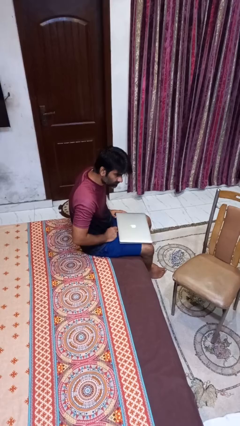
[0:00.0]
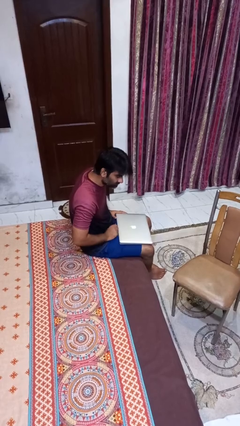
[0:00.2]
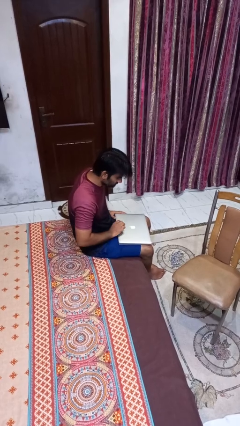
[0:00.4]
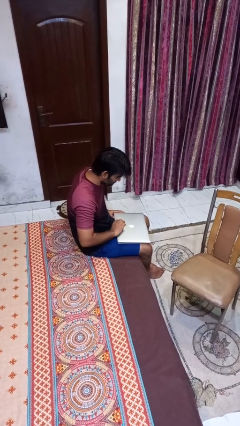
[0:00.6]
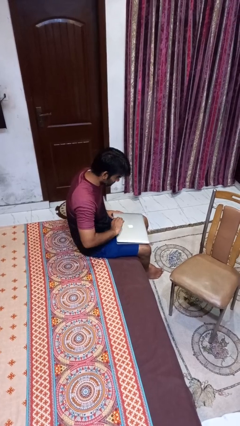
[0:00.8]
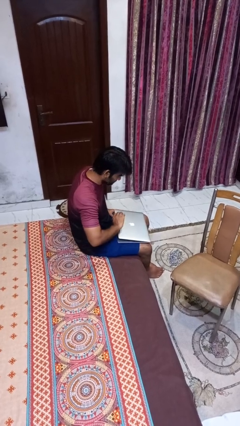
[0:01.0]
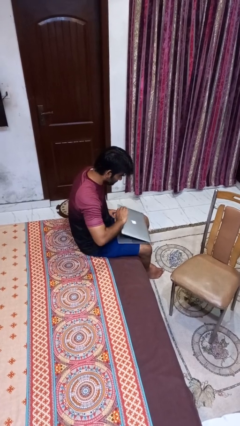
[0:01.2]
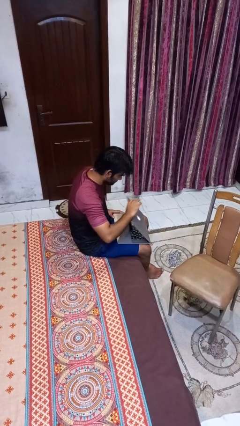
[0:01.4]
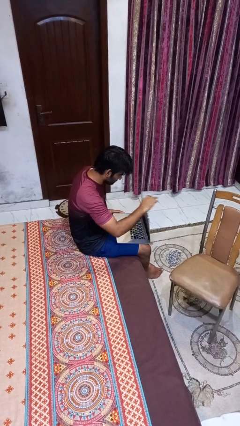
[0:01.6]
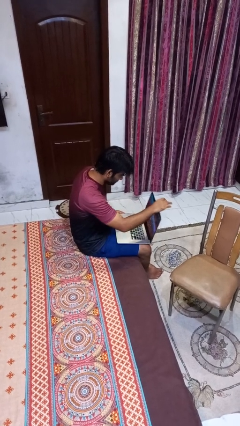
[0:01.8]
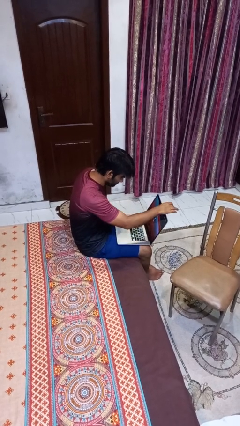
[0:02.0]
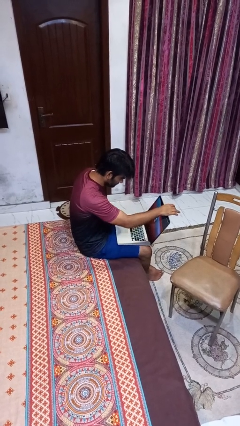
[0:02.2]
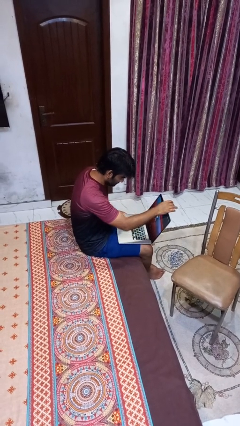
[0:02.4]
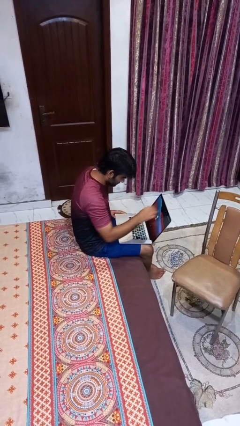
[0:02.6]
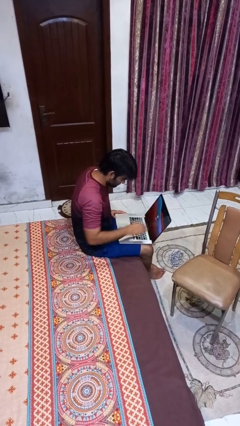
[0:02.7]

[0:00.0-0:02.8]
person opens laptop

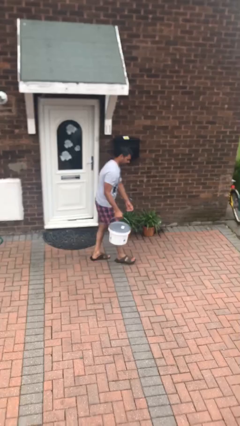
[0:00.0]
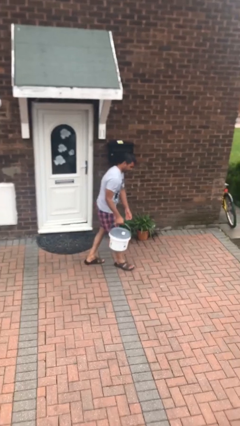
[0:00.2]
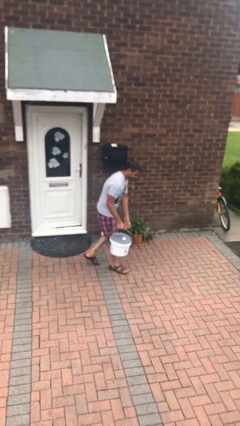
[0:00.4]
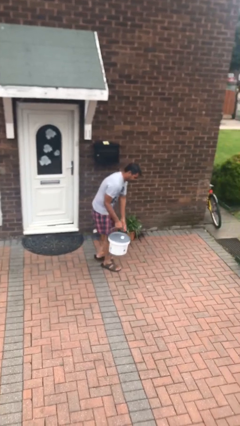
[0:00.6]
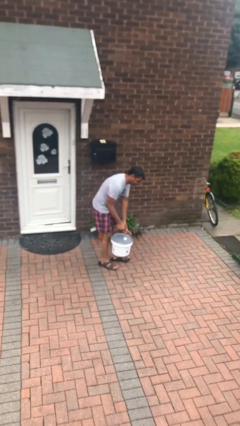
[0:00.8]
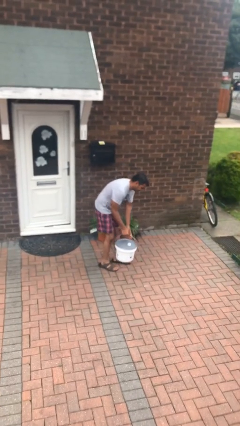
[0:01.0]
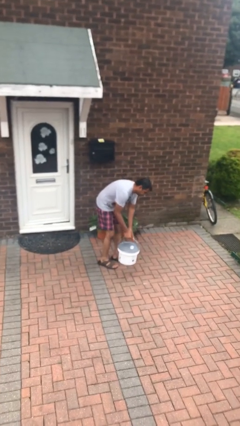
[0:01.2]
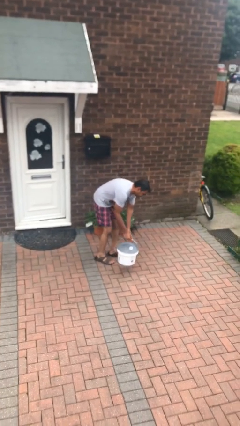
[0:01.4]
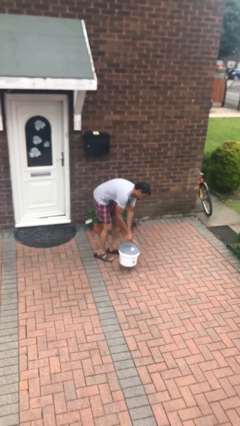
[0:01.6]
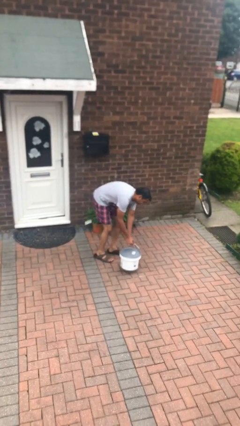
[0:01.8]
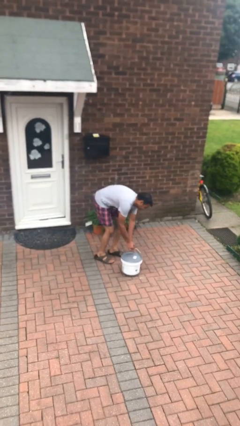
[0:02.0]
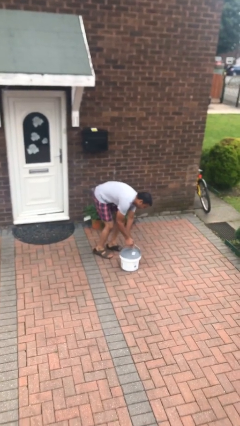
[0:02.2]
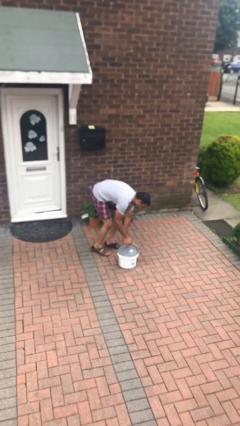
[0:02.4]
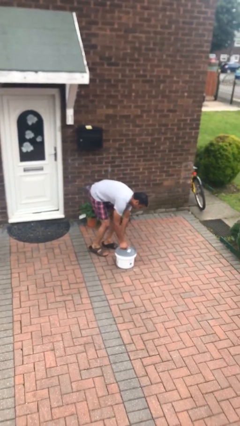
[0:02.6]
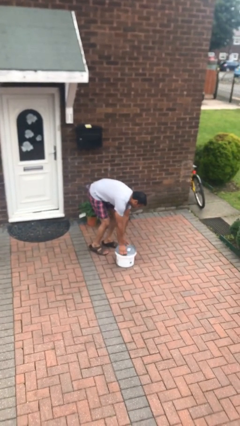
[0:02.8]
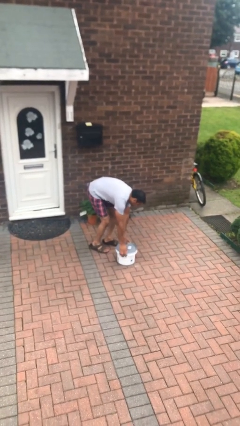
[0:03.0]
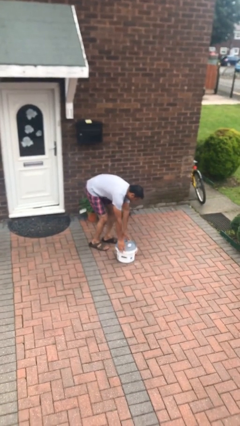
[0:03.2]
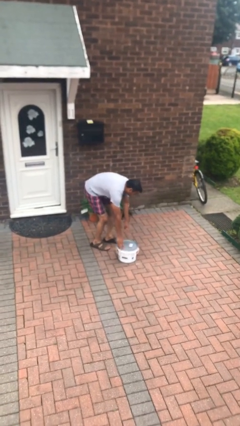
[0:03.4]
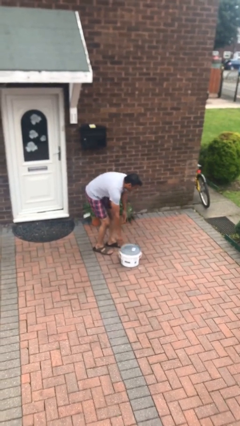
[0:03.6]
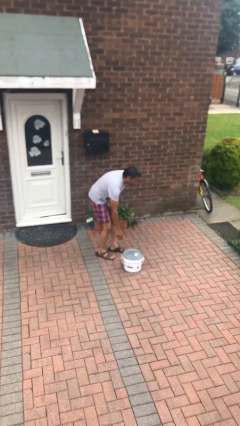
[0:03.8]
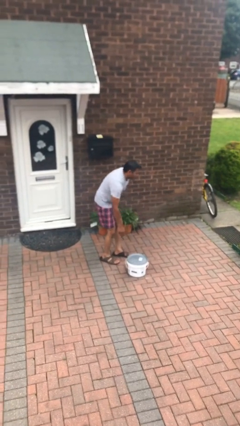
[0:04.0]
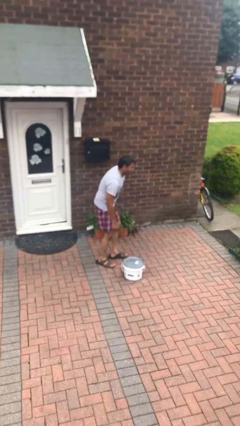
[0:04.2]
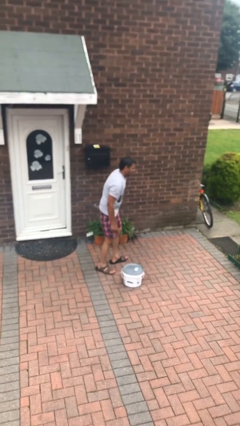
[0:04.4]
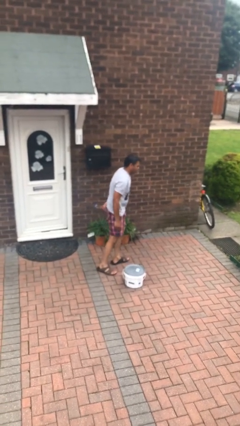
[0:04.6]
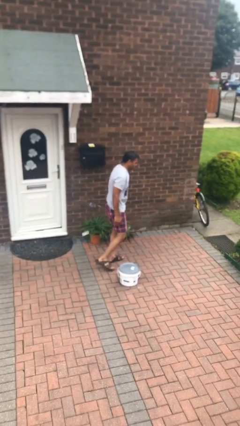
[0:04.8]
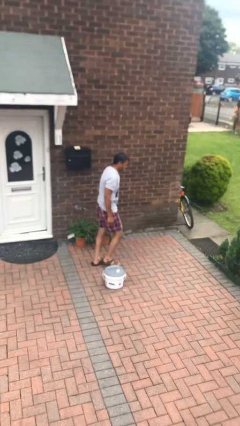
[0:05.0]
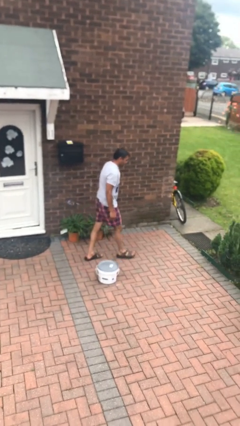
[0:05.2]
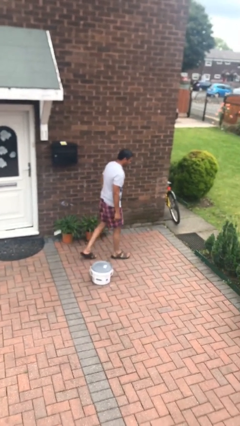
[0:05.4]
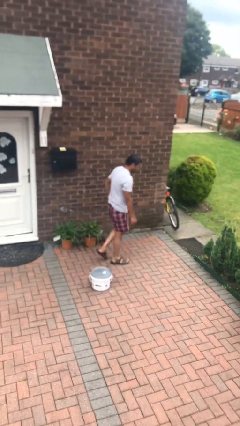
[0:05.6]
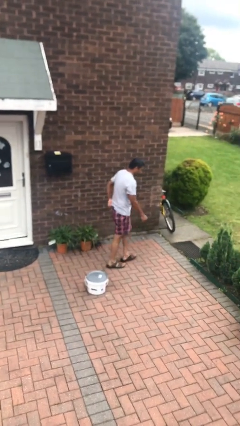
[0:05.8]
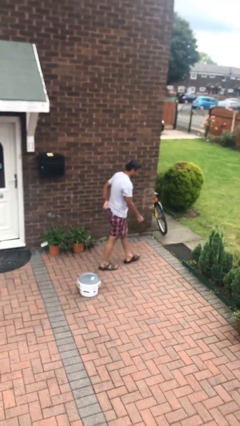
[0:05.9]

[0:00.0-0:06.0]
person puts down object on floor

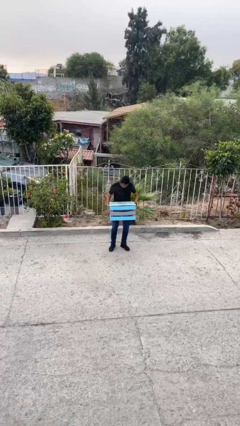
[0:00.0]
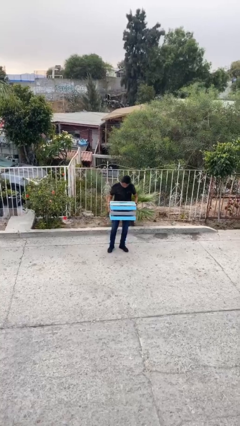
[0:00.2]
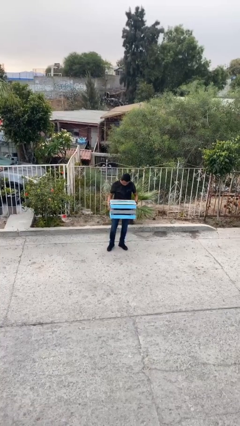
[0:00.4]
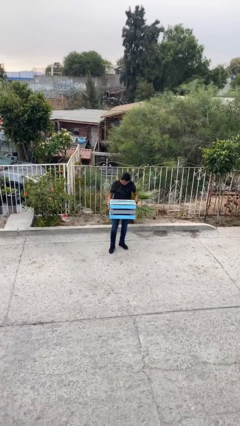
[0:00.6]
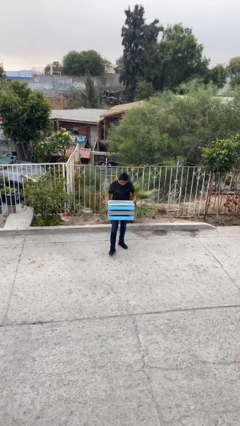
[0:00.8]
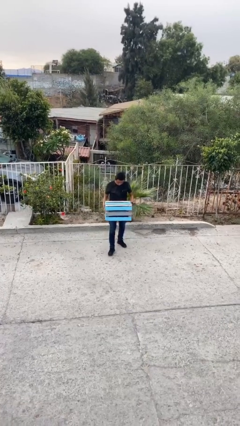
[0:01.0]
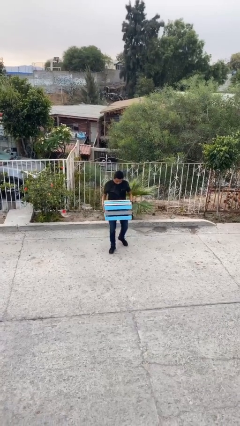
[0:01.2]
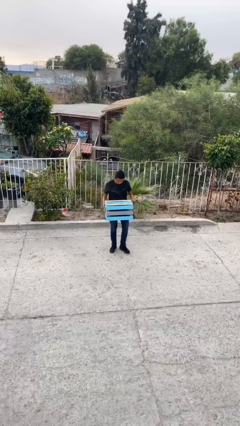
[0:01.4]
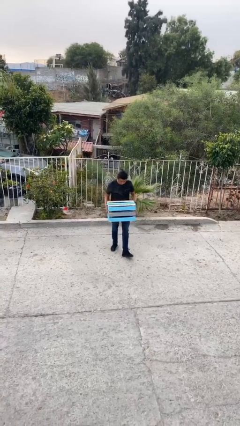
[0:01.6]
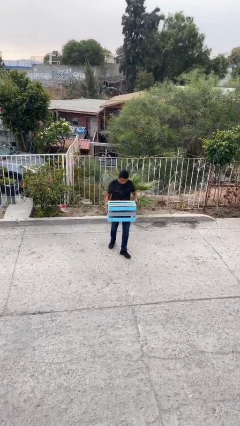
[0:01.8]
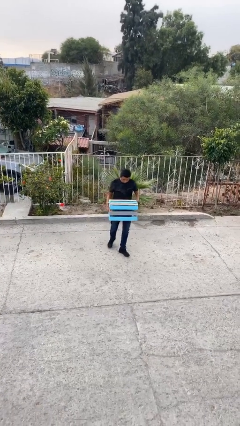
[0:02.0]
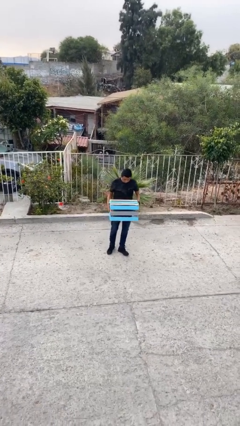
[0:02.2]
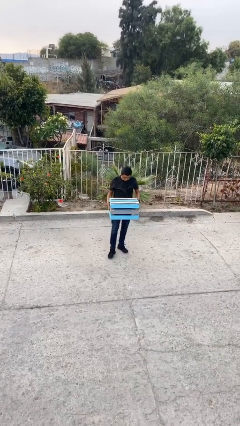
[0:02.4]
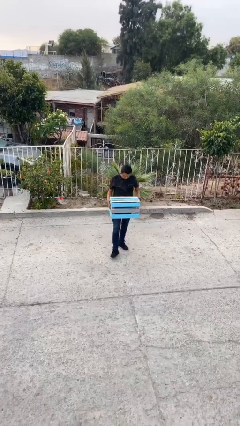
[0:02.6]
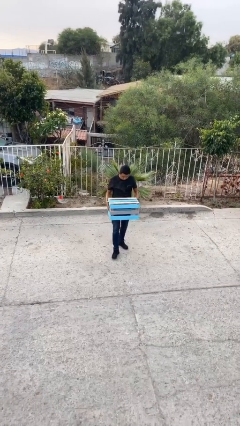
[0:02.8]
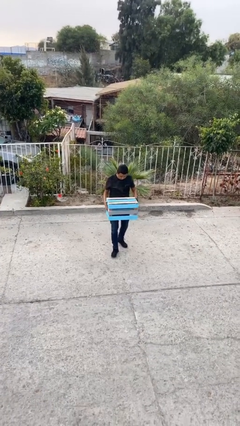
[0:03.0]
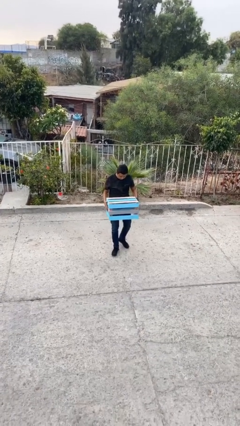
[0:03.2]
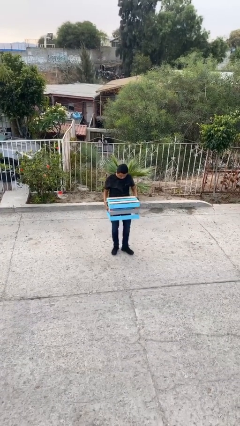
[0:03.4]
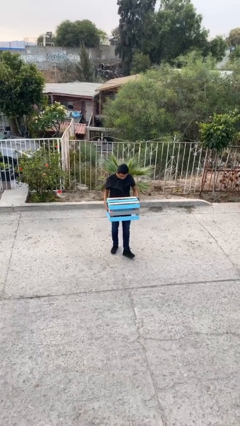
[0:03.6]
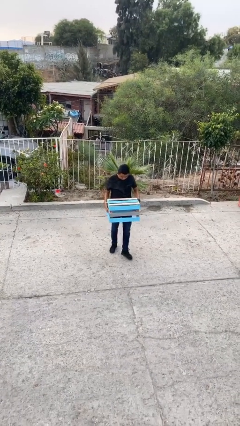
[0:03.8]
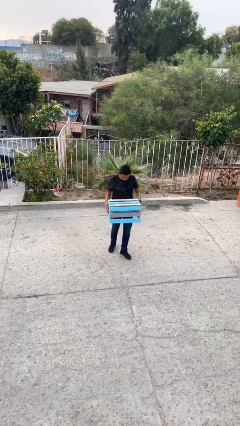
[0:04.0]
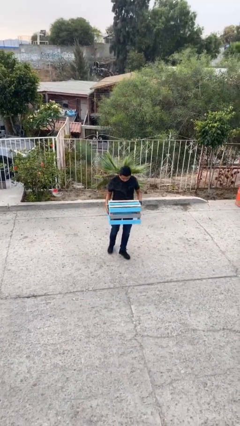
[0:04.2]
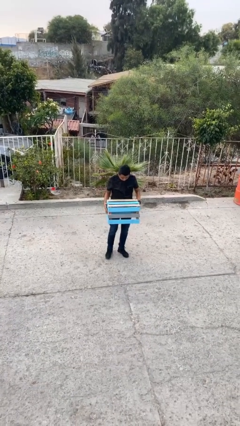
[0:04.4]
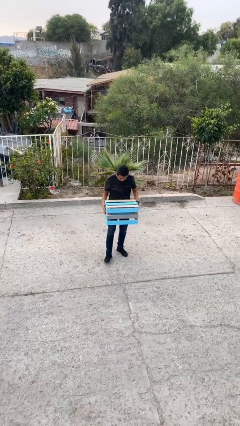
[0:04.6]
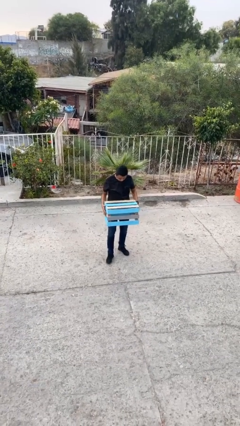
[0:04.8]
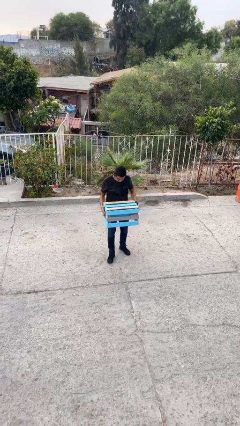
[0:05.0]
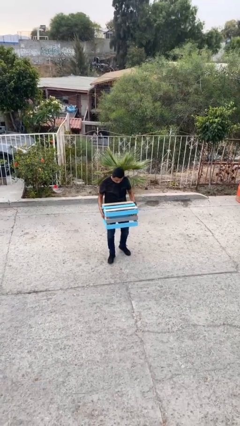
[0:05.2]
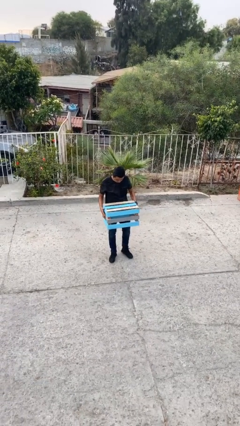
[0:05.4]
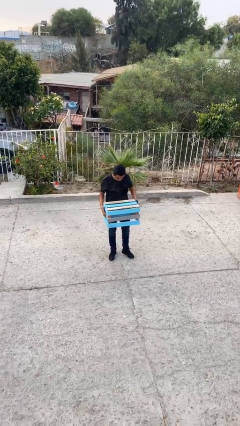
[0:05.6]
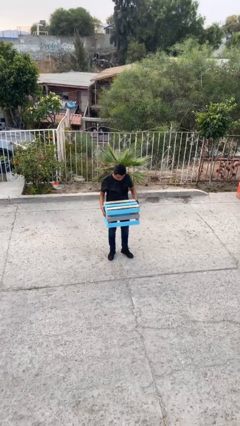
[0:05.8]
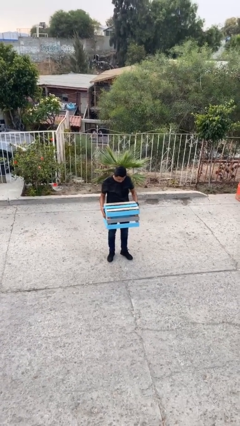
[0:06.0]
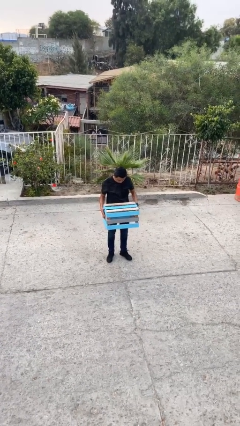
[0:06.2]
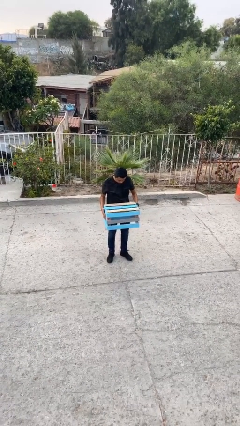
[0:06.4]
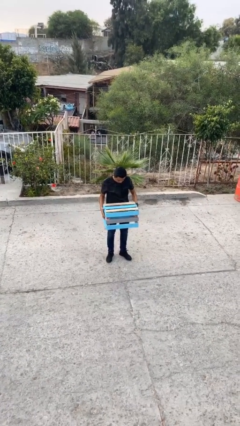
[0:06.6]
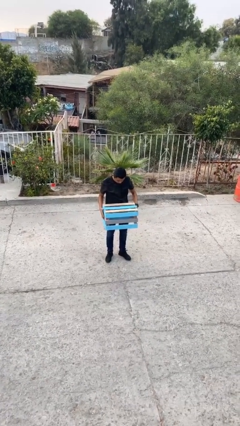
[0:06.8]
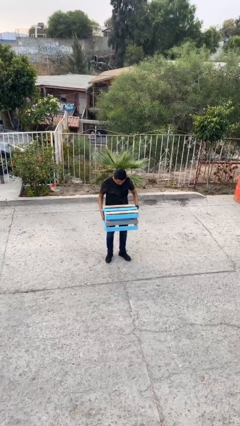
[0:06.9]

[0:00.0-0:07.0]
person carries heavy object

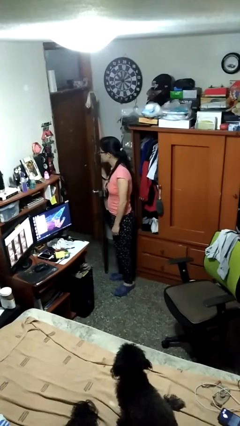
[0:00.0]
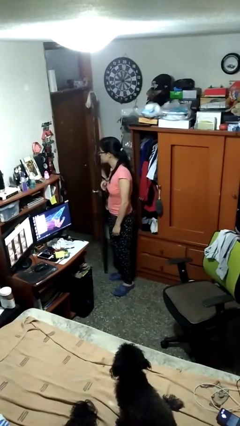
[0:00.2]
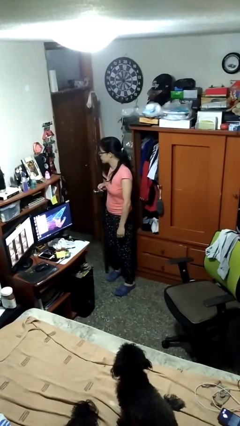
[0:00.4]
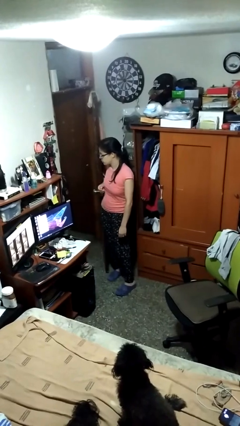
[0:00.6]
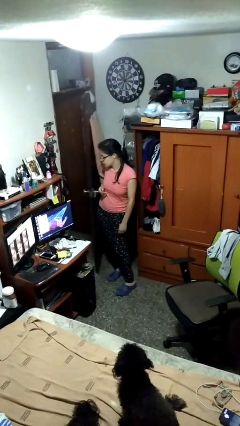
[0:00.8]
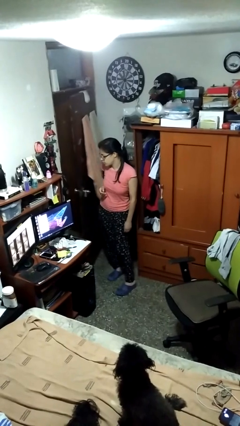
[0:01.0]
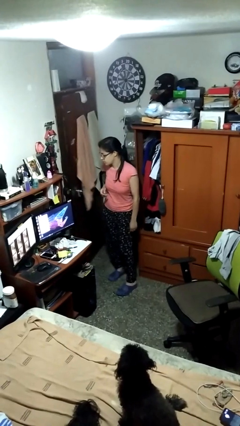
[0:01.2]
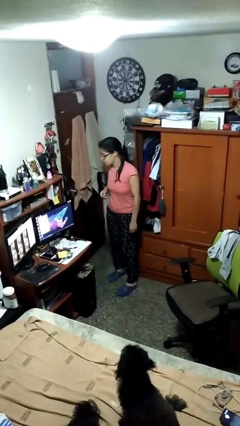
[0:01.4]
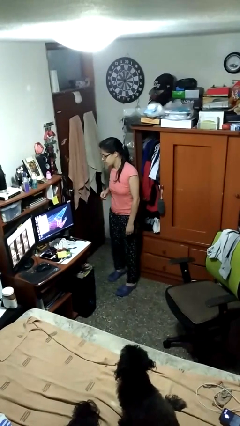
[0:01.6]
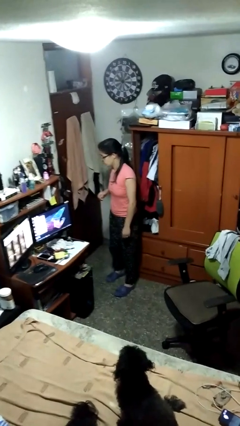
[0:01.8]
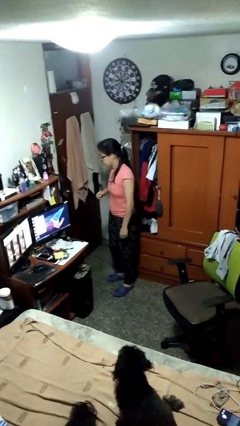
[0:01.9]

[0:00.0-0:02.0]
person closes door with hip
